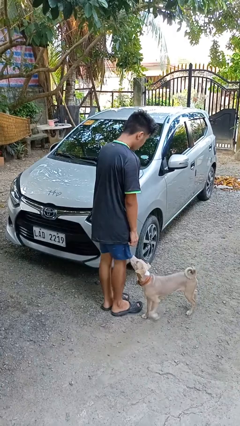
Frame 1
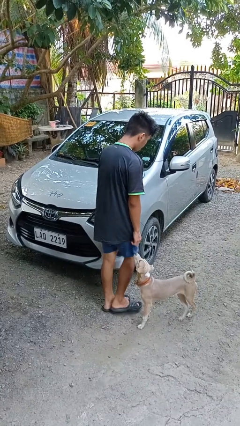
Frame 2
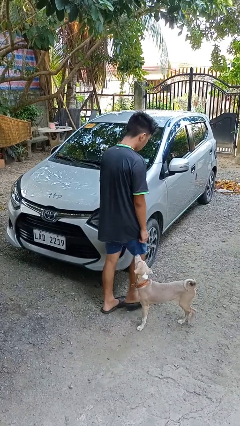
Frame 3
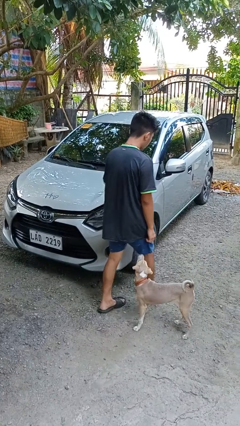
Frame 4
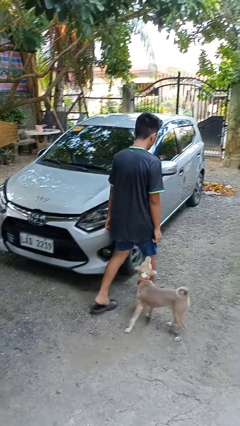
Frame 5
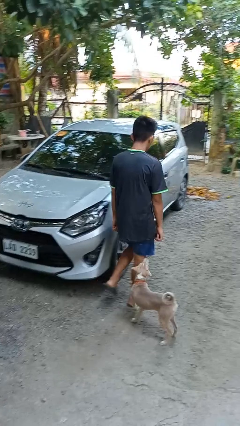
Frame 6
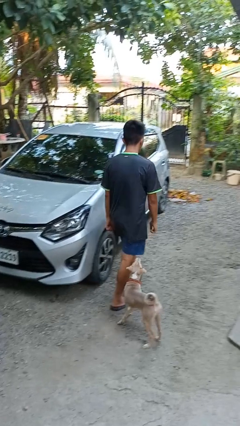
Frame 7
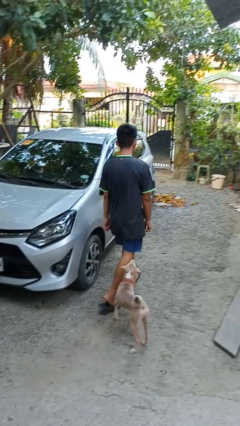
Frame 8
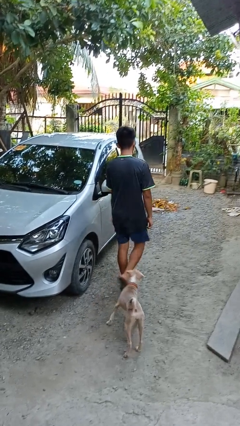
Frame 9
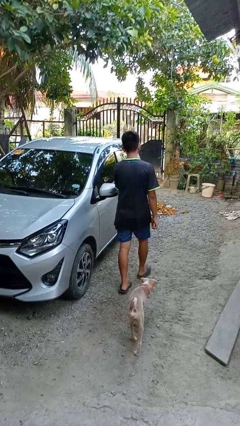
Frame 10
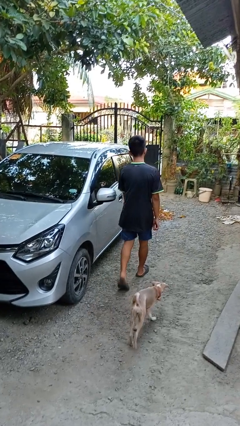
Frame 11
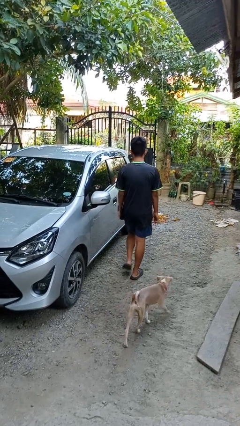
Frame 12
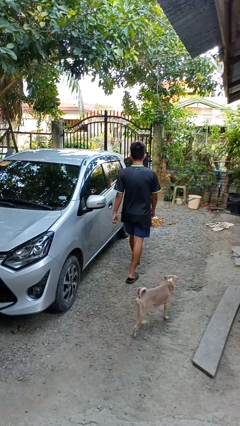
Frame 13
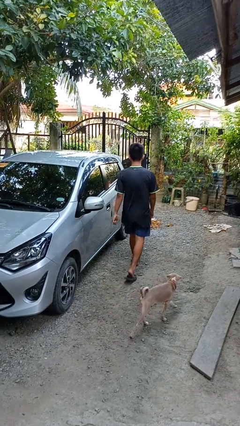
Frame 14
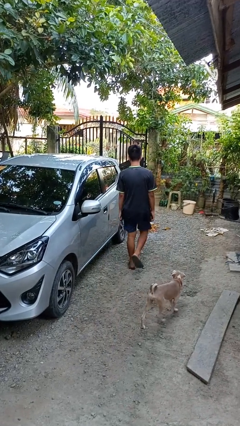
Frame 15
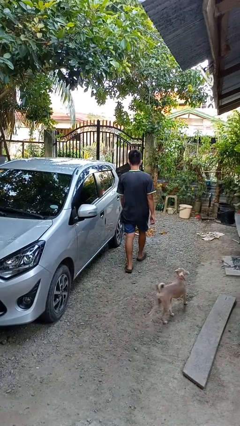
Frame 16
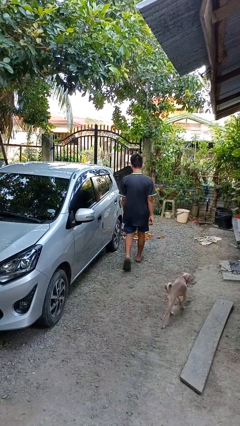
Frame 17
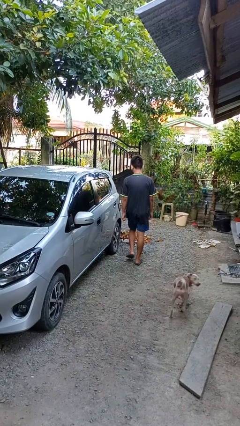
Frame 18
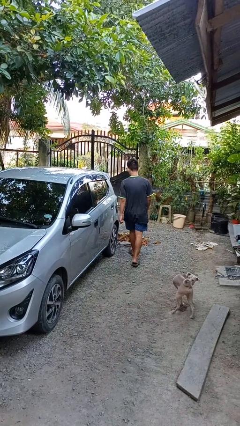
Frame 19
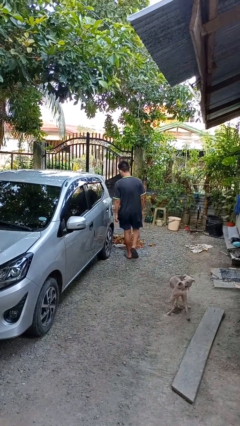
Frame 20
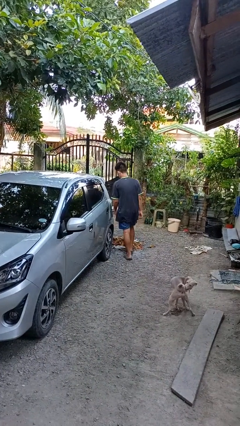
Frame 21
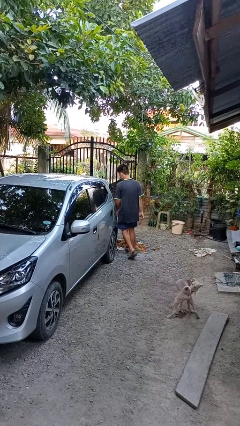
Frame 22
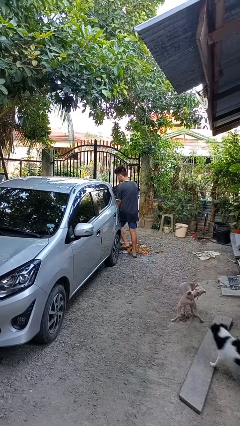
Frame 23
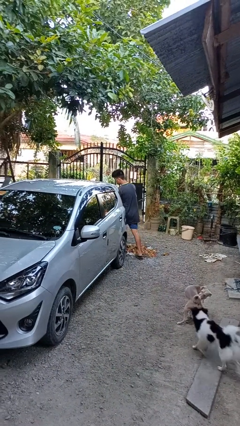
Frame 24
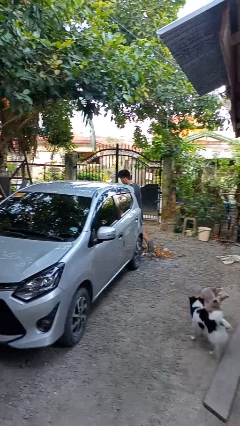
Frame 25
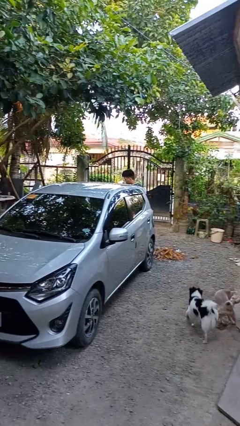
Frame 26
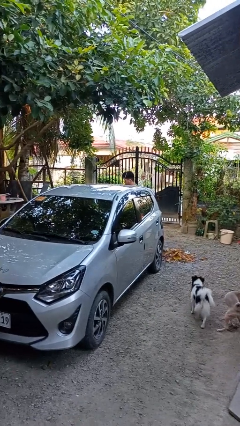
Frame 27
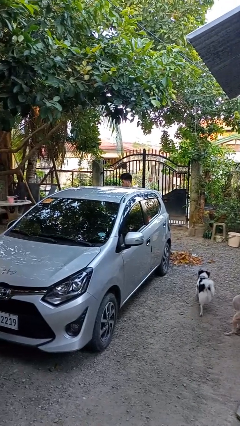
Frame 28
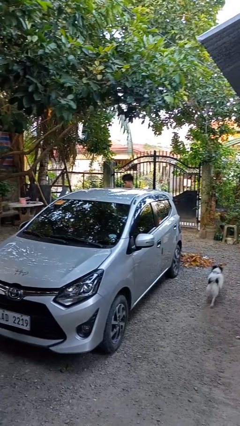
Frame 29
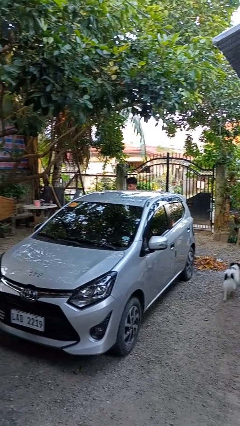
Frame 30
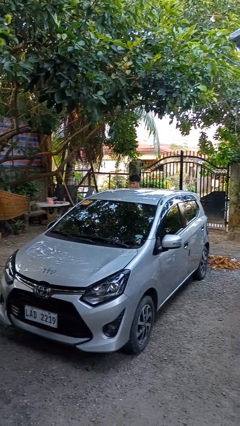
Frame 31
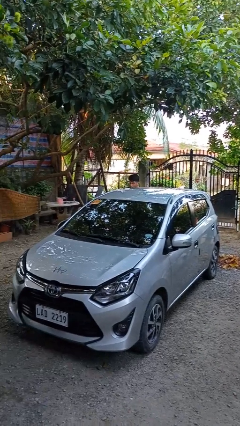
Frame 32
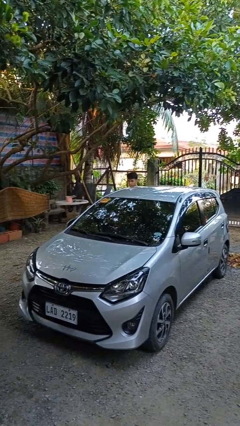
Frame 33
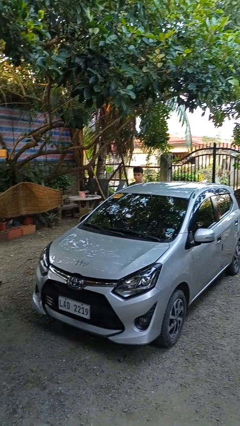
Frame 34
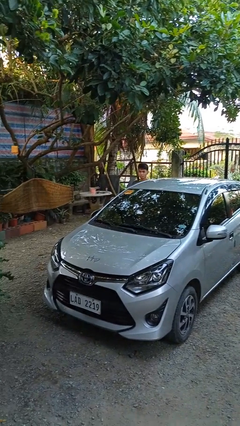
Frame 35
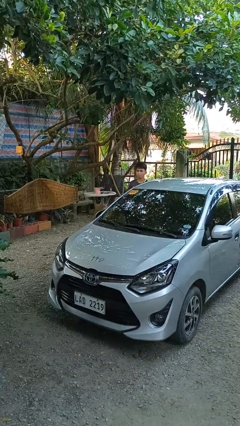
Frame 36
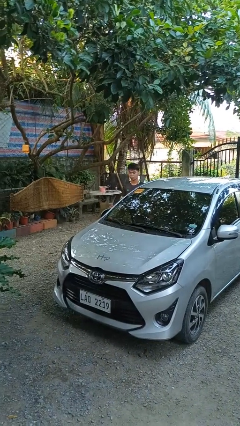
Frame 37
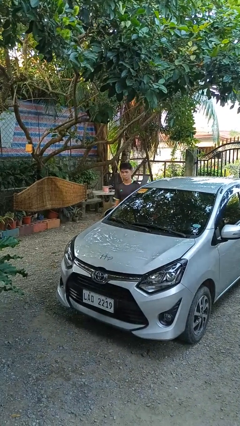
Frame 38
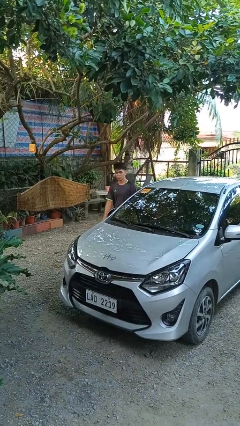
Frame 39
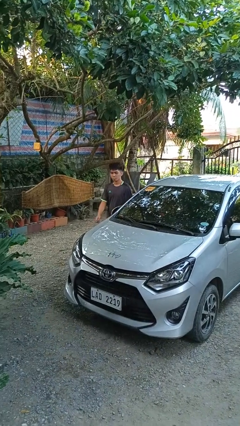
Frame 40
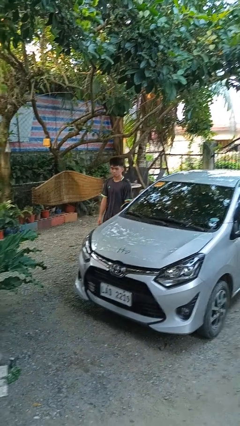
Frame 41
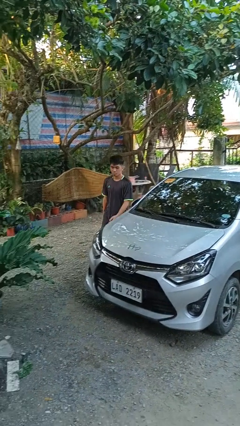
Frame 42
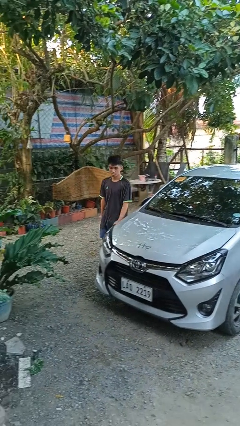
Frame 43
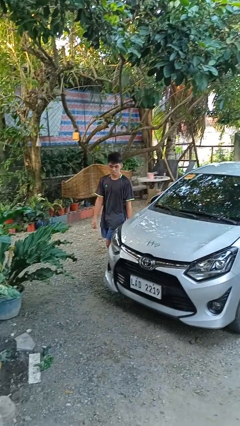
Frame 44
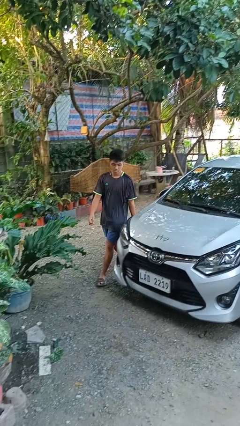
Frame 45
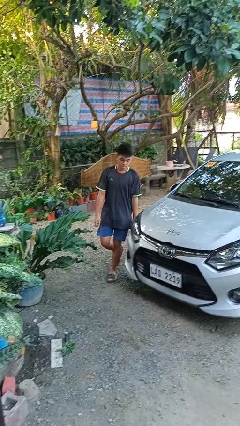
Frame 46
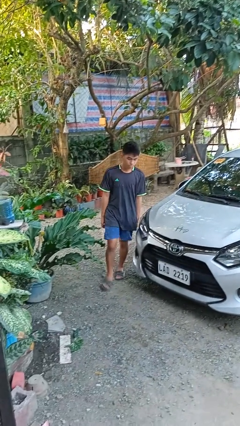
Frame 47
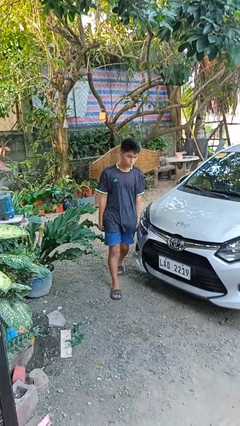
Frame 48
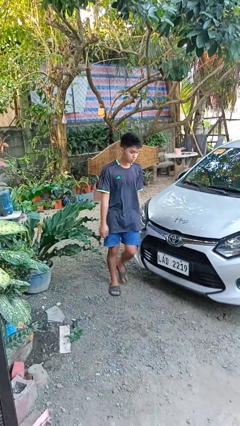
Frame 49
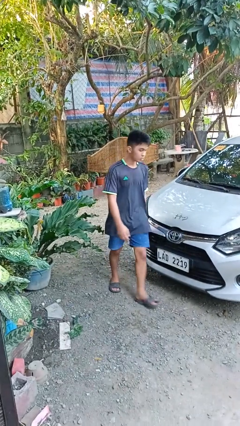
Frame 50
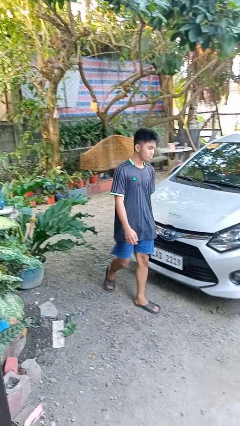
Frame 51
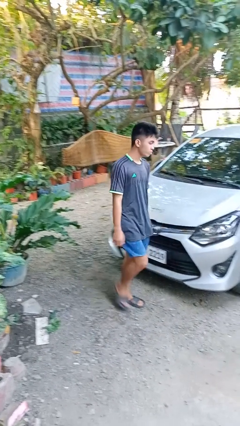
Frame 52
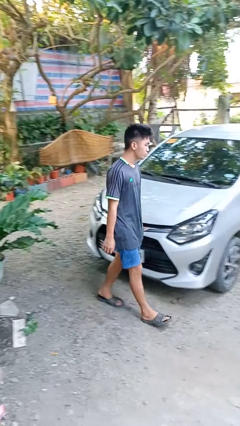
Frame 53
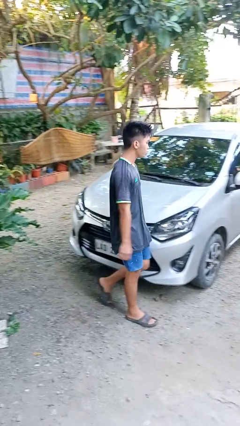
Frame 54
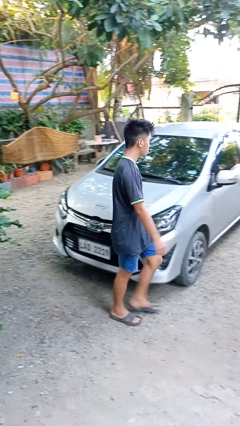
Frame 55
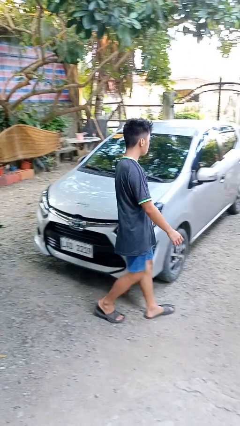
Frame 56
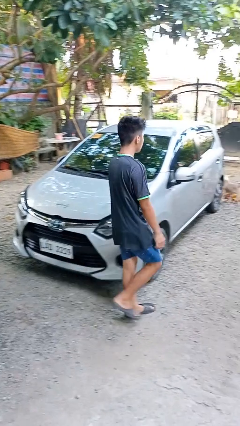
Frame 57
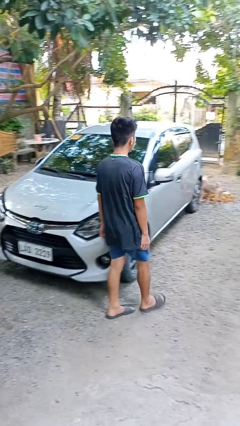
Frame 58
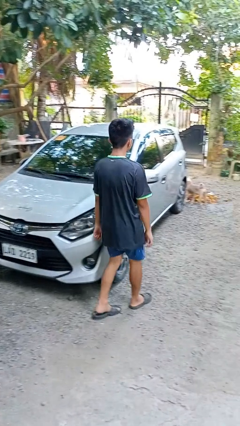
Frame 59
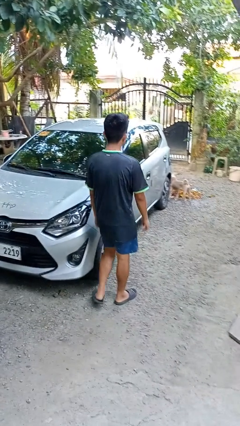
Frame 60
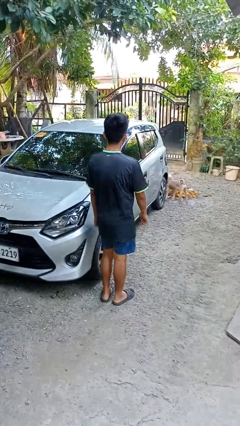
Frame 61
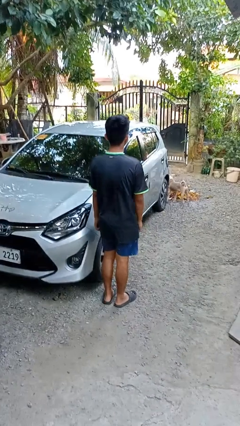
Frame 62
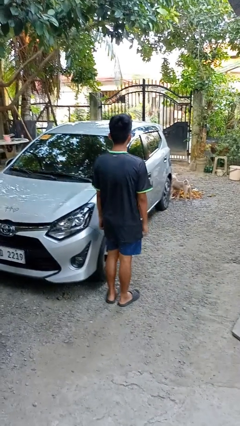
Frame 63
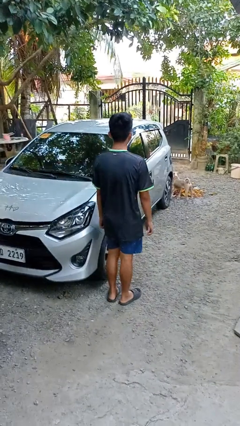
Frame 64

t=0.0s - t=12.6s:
person walks around car

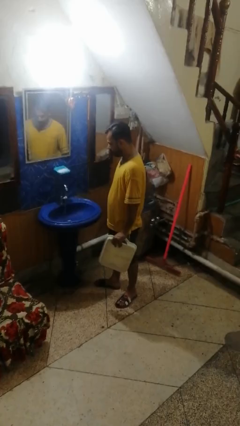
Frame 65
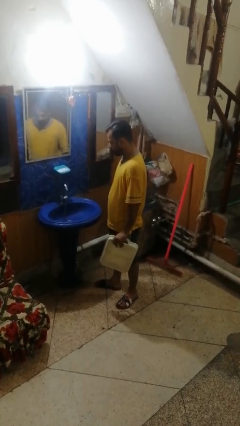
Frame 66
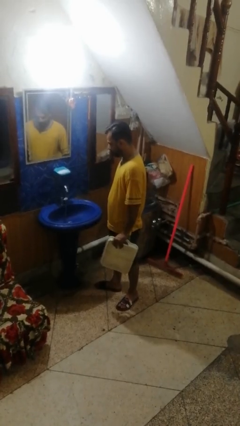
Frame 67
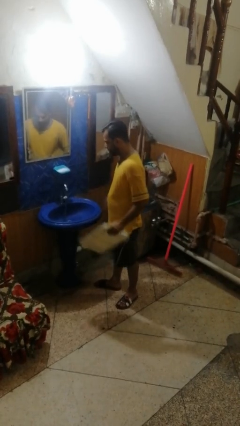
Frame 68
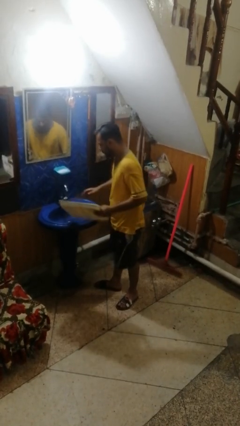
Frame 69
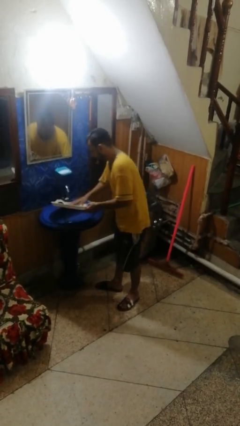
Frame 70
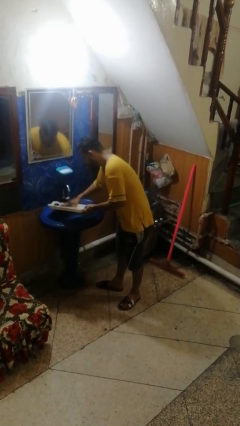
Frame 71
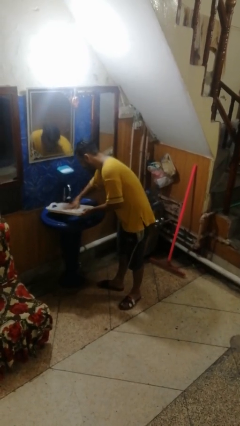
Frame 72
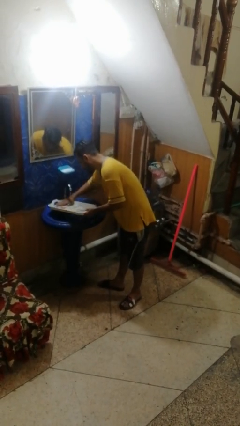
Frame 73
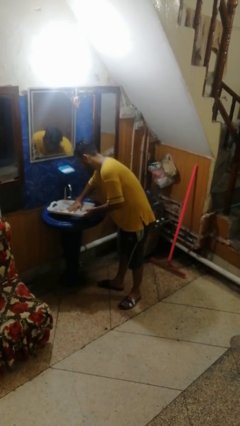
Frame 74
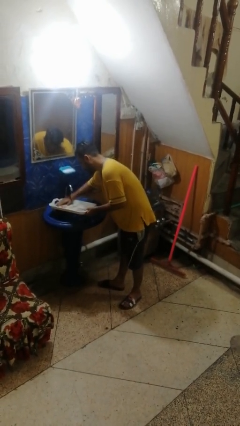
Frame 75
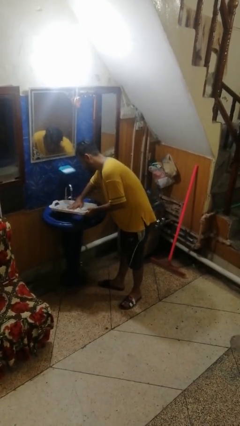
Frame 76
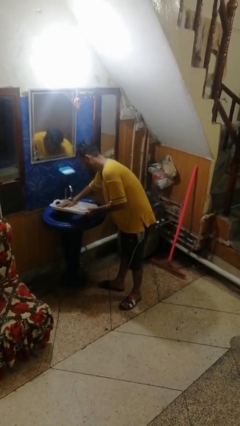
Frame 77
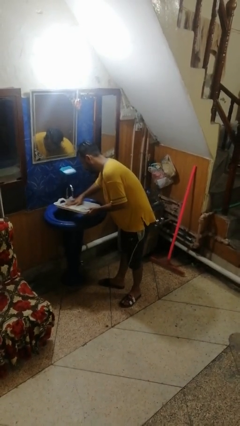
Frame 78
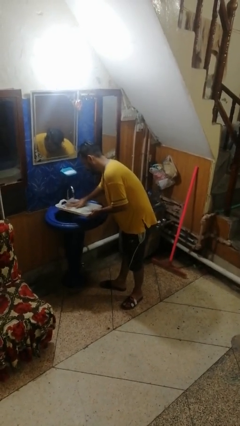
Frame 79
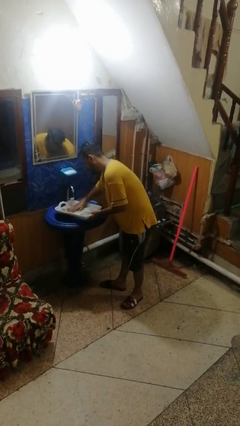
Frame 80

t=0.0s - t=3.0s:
person washes dish

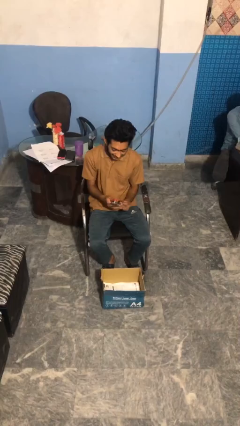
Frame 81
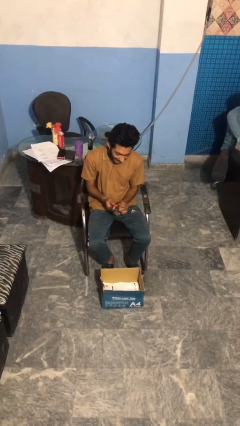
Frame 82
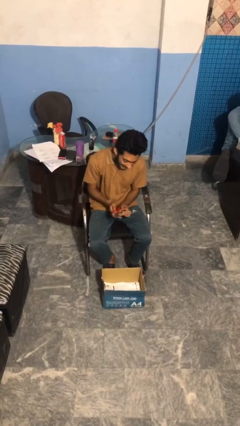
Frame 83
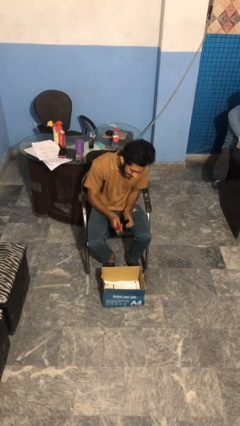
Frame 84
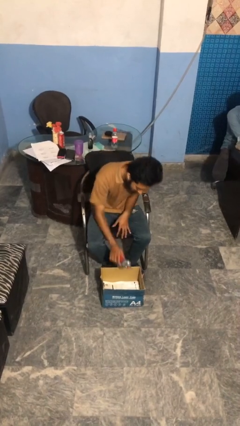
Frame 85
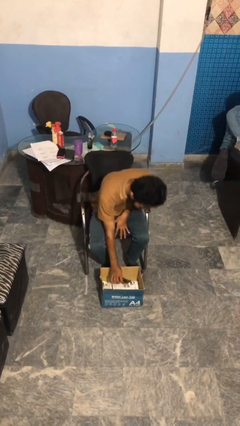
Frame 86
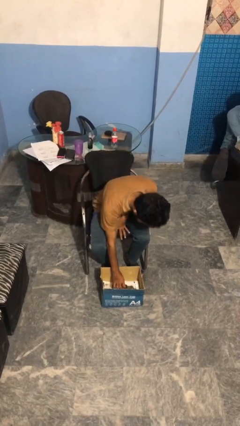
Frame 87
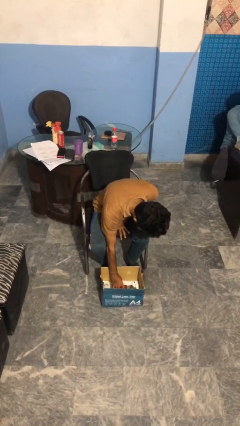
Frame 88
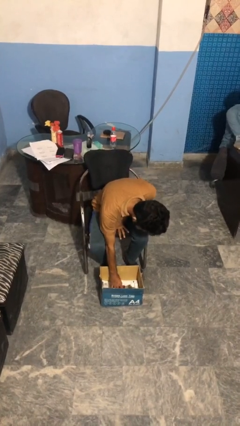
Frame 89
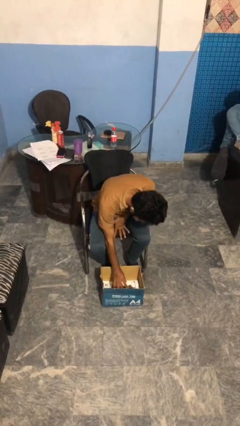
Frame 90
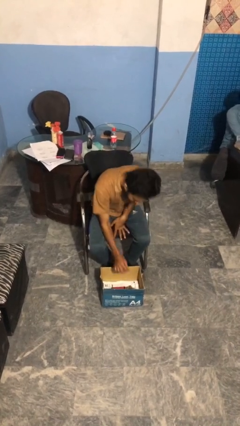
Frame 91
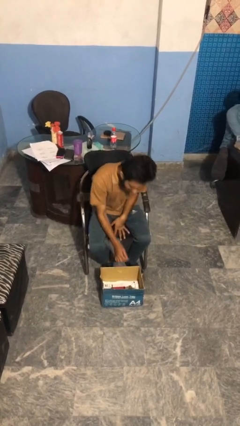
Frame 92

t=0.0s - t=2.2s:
person puts object into box
